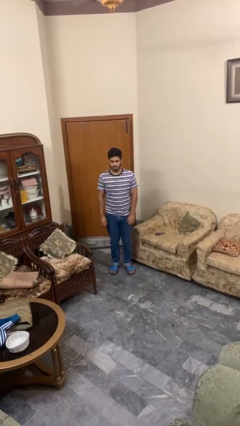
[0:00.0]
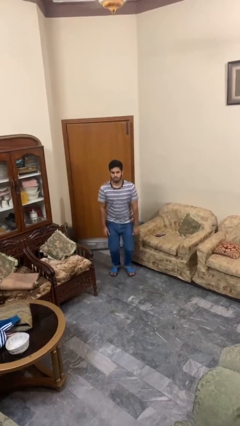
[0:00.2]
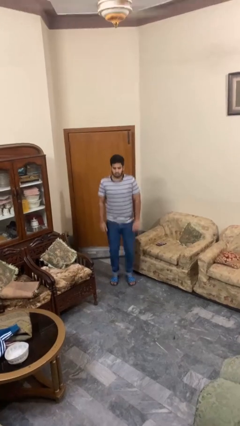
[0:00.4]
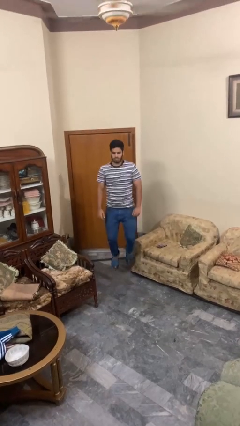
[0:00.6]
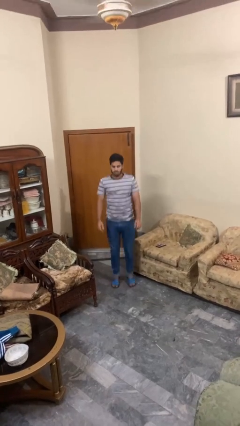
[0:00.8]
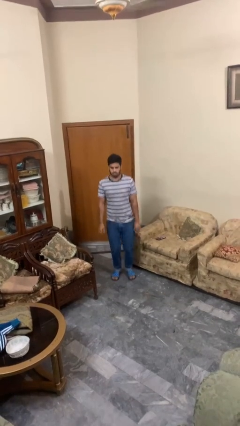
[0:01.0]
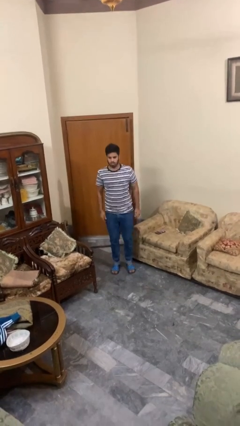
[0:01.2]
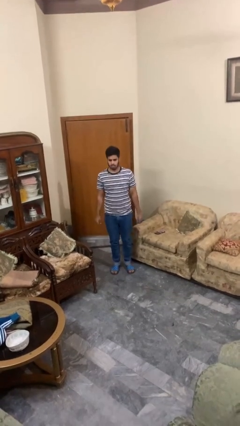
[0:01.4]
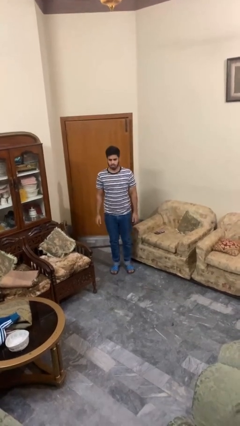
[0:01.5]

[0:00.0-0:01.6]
person jumps

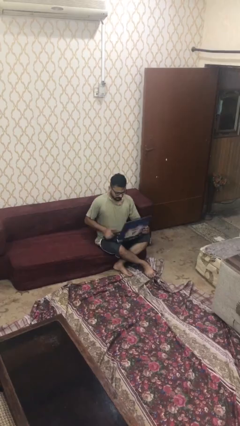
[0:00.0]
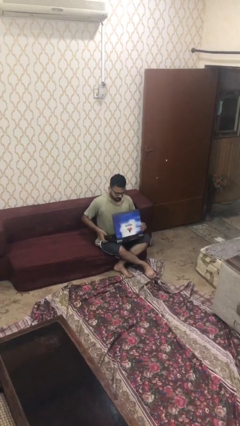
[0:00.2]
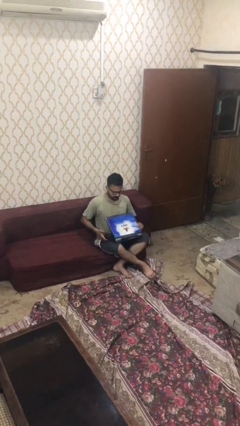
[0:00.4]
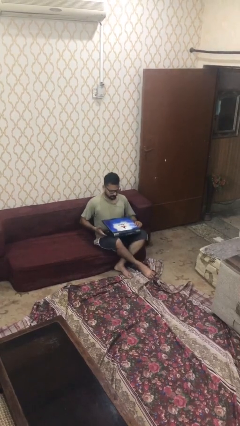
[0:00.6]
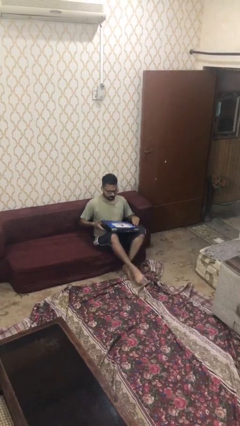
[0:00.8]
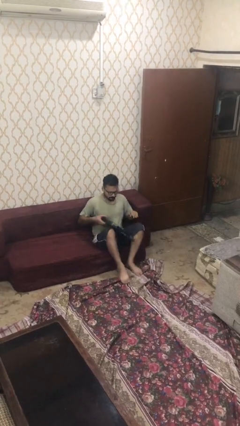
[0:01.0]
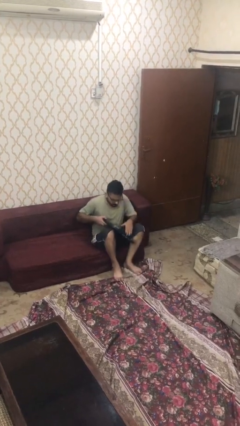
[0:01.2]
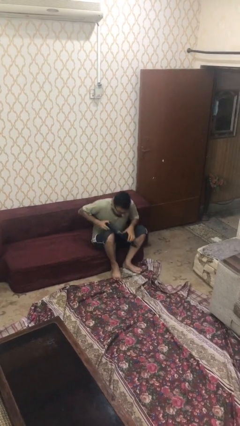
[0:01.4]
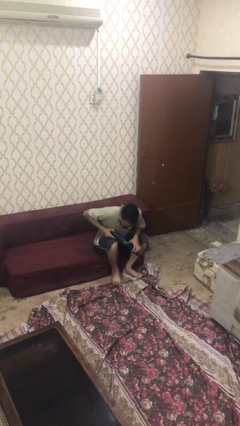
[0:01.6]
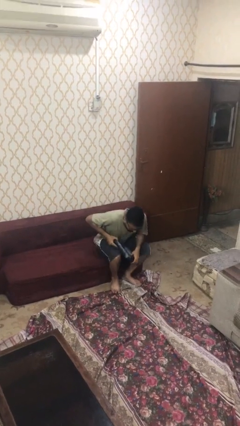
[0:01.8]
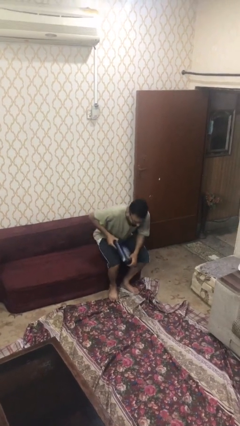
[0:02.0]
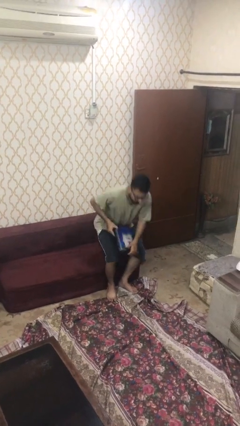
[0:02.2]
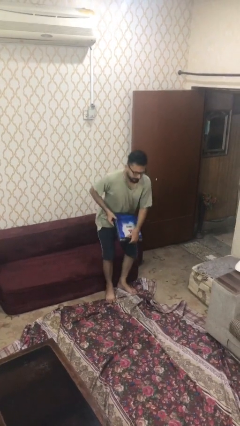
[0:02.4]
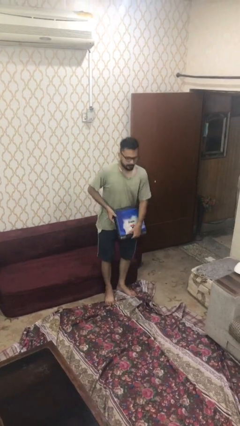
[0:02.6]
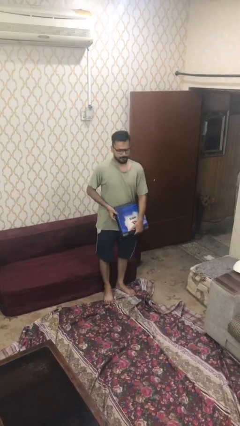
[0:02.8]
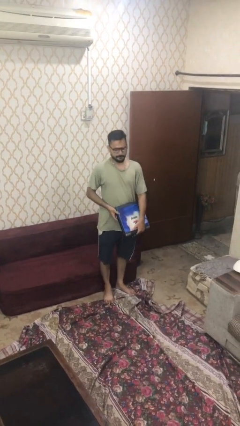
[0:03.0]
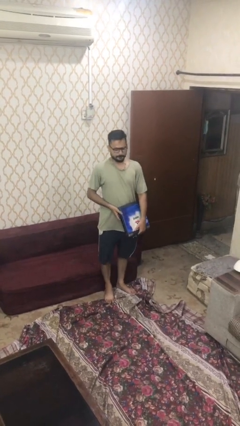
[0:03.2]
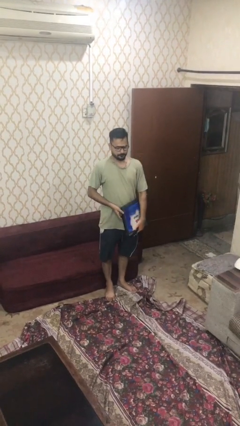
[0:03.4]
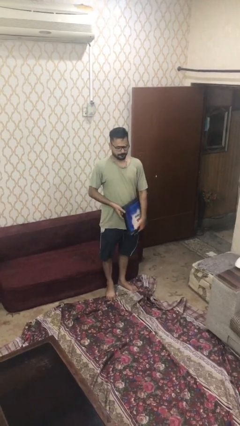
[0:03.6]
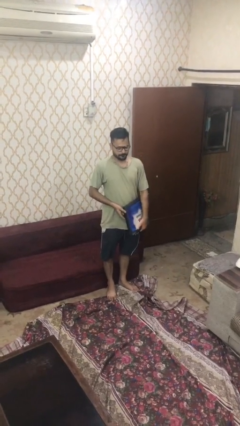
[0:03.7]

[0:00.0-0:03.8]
person stands up

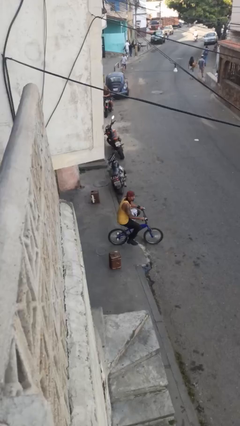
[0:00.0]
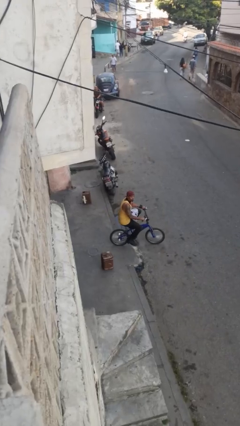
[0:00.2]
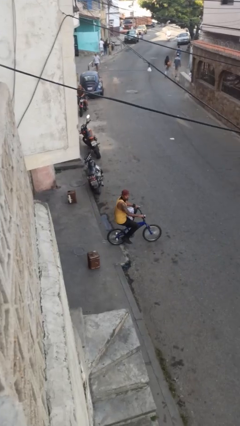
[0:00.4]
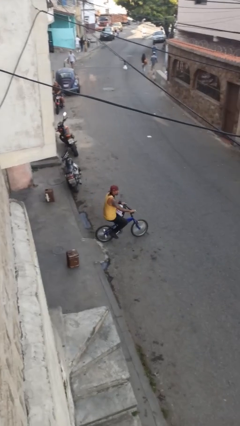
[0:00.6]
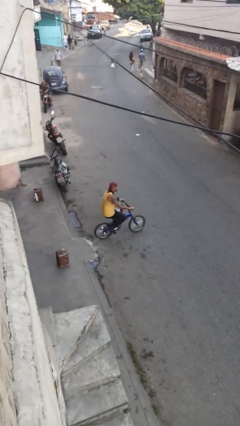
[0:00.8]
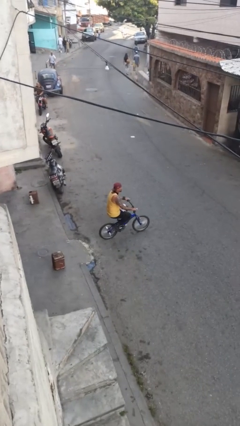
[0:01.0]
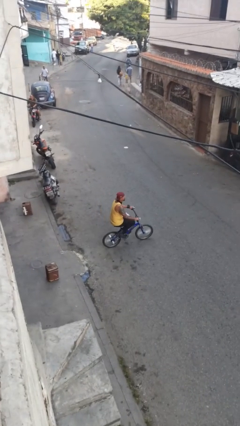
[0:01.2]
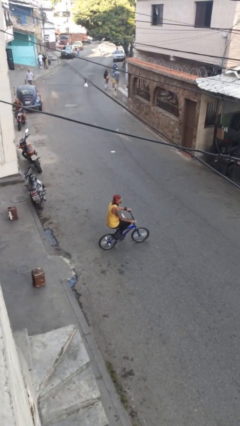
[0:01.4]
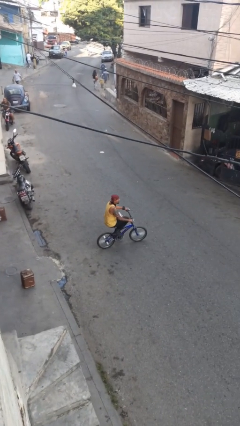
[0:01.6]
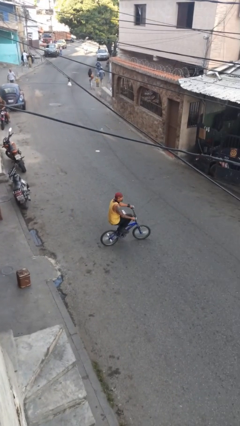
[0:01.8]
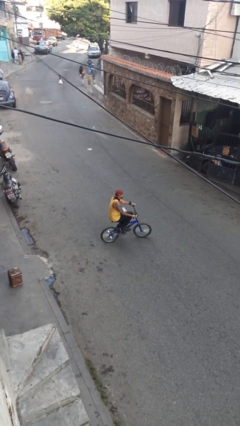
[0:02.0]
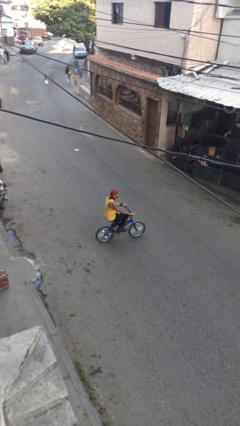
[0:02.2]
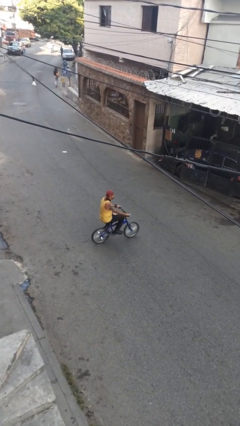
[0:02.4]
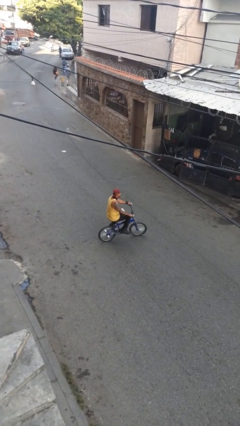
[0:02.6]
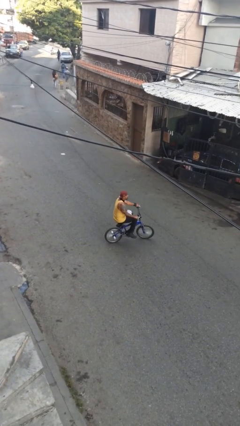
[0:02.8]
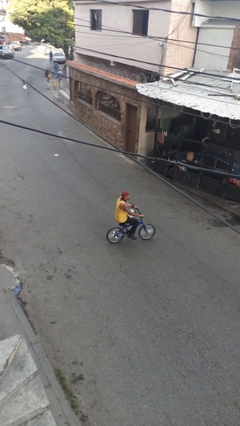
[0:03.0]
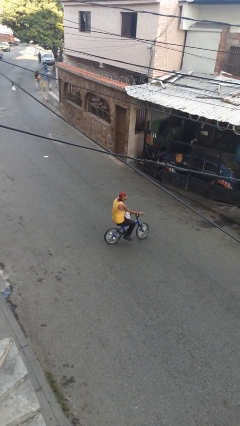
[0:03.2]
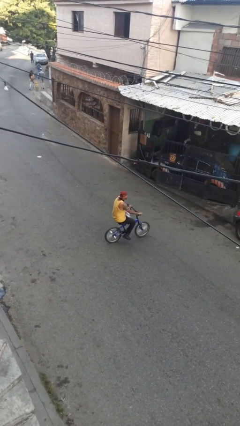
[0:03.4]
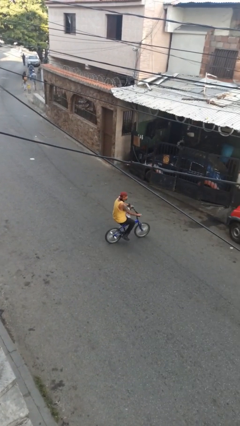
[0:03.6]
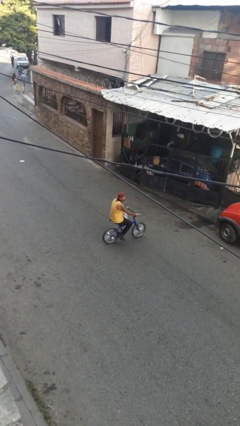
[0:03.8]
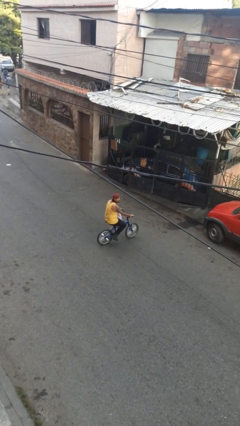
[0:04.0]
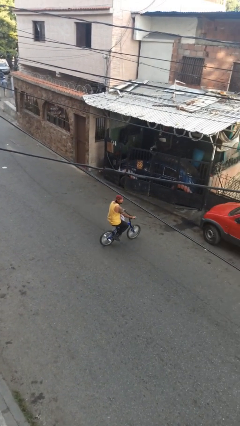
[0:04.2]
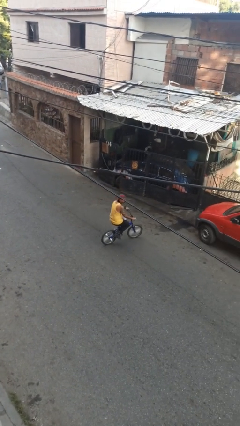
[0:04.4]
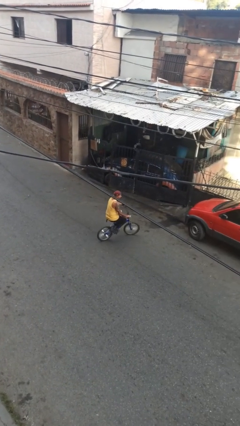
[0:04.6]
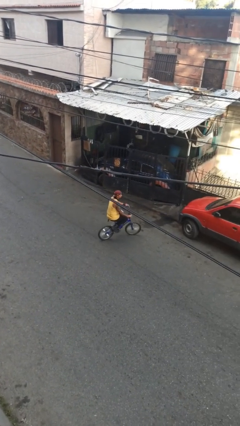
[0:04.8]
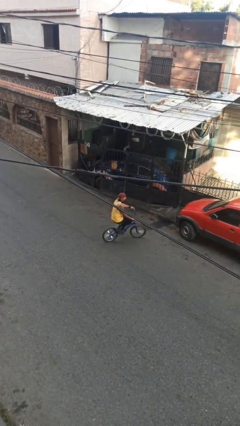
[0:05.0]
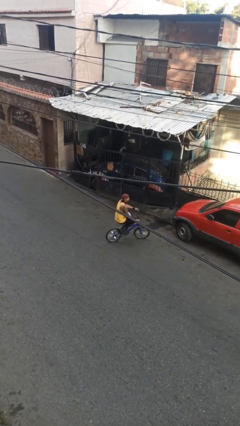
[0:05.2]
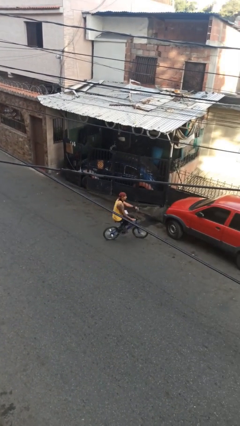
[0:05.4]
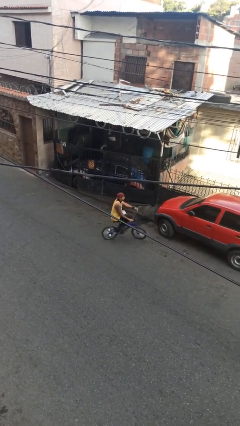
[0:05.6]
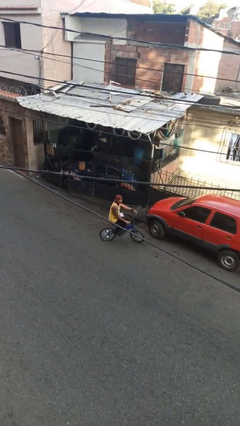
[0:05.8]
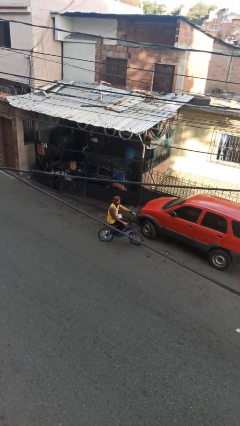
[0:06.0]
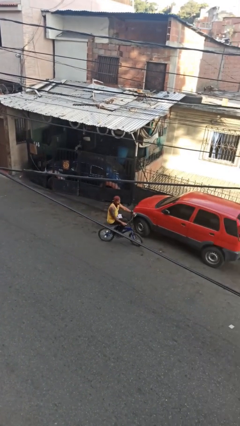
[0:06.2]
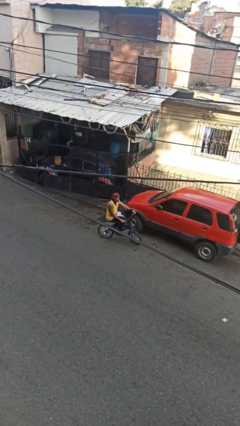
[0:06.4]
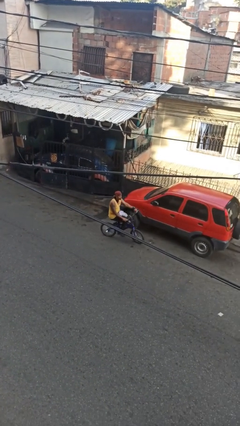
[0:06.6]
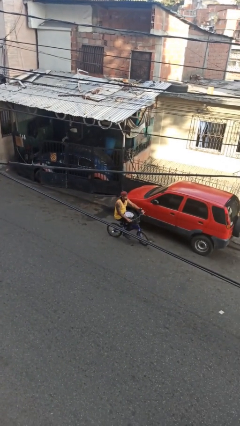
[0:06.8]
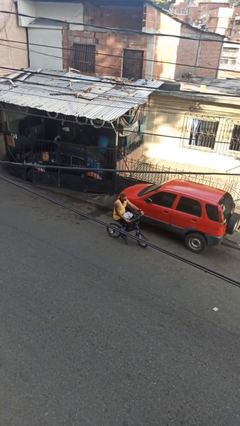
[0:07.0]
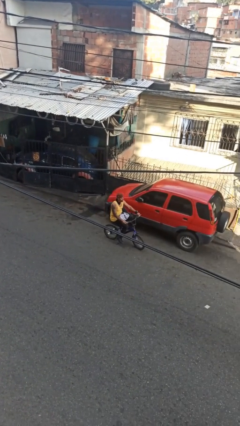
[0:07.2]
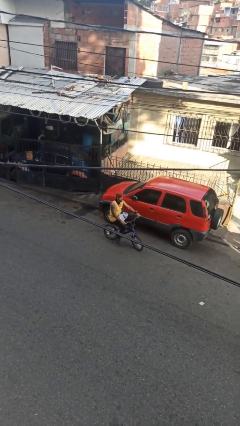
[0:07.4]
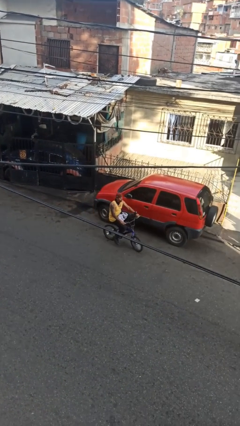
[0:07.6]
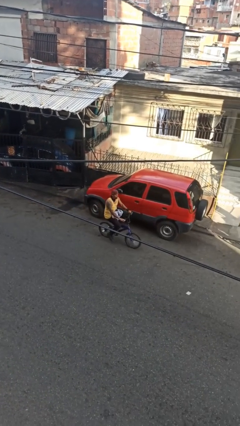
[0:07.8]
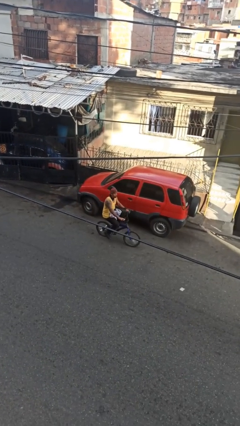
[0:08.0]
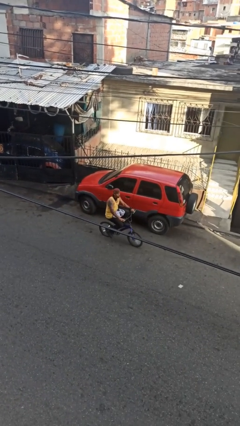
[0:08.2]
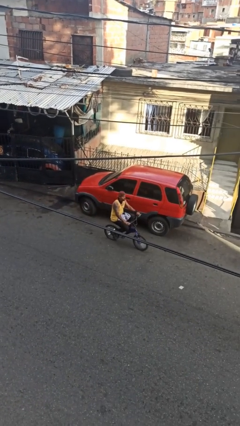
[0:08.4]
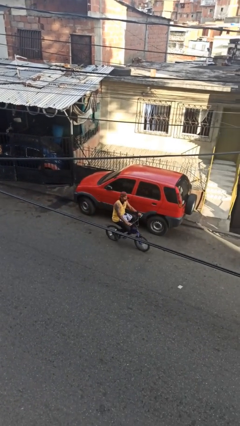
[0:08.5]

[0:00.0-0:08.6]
person rides bicycle

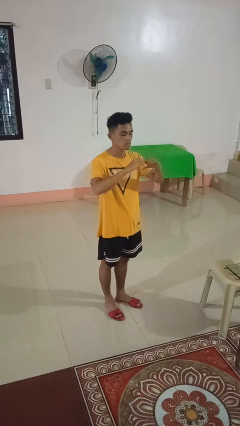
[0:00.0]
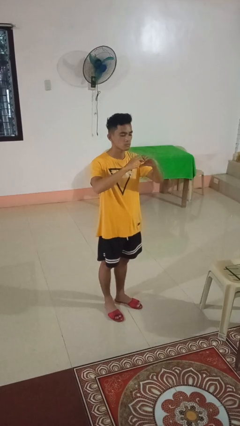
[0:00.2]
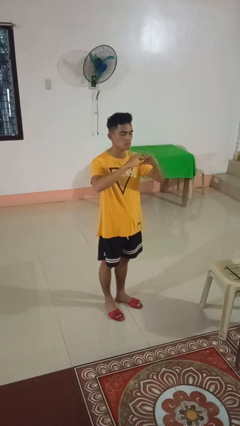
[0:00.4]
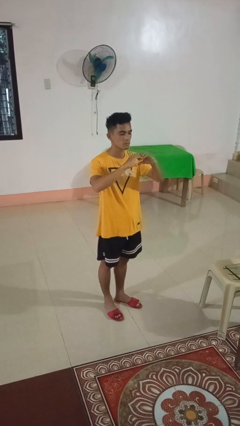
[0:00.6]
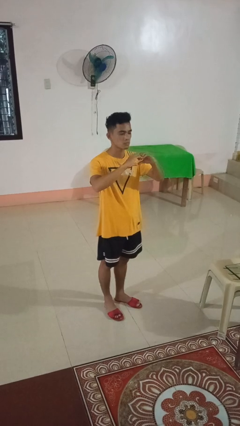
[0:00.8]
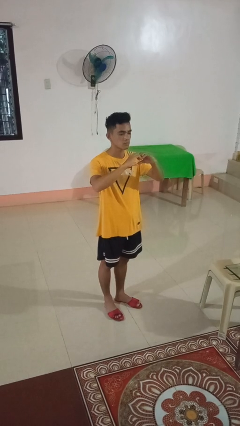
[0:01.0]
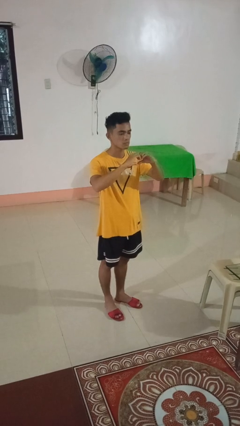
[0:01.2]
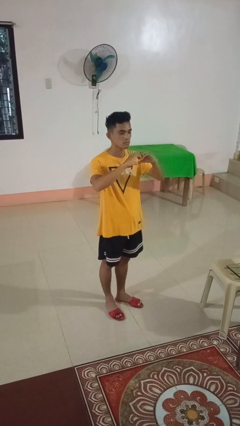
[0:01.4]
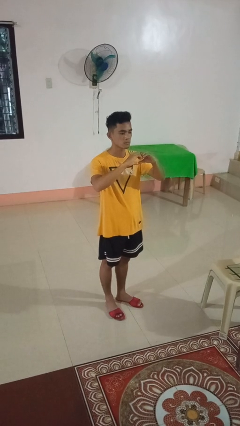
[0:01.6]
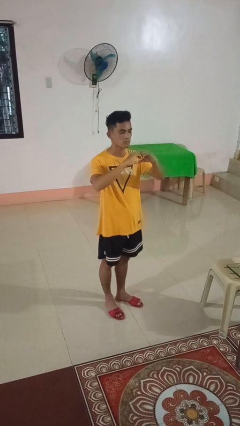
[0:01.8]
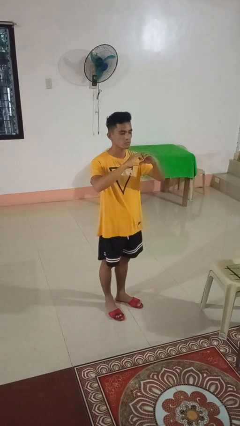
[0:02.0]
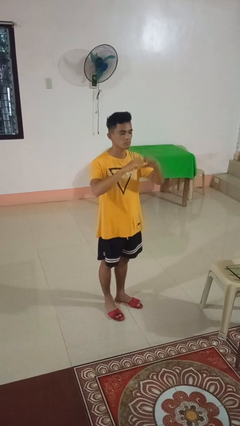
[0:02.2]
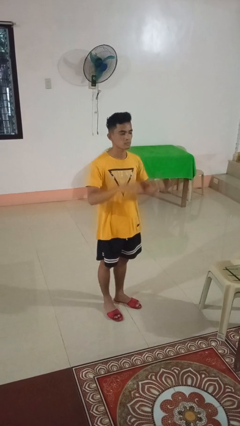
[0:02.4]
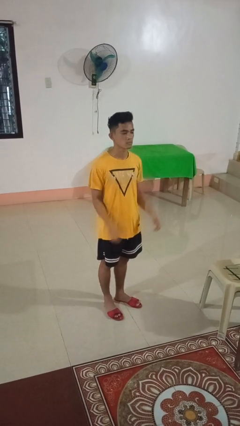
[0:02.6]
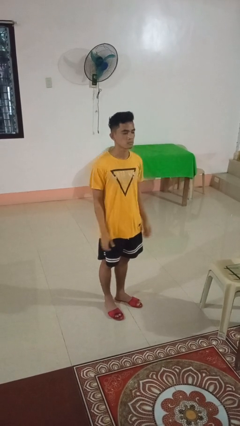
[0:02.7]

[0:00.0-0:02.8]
person gestures heart

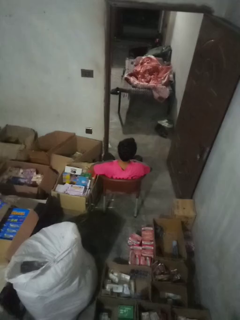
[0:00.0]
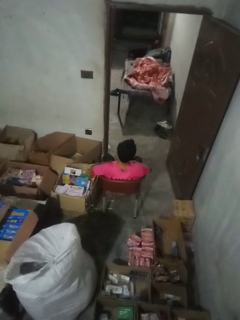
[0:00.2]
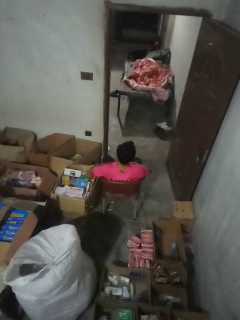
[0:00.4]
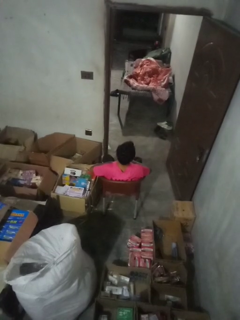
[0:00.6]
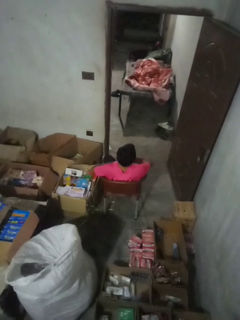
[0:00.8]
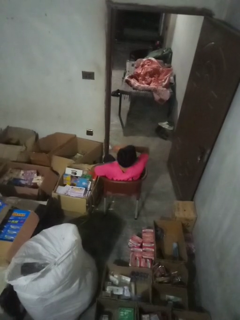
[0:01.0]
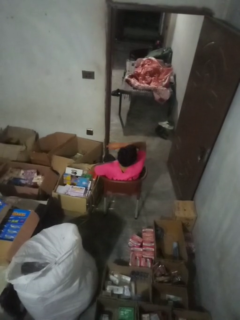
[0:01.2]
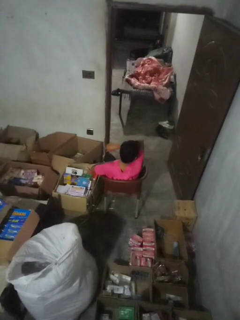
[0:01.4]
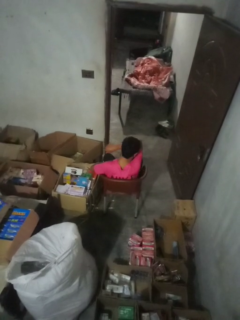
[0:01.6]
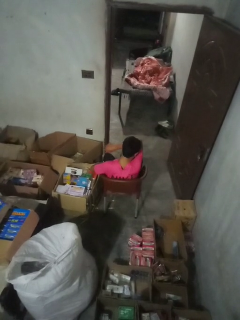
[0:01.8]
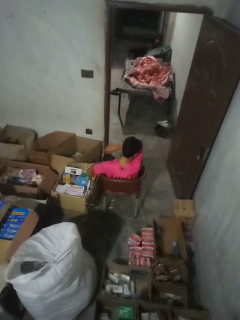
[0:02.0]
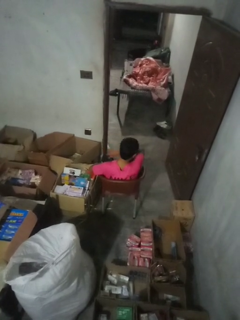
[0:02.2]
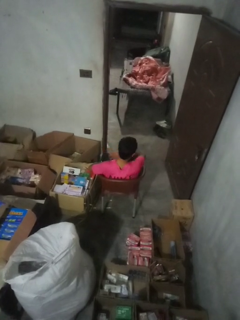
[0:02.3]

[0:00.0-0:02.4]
person sneezes into arm
